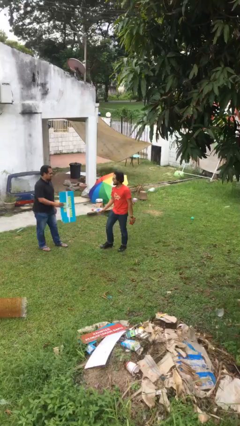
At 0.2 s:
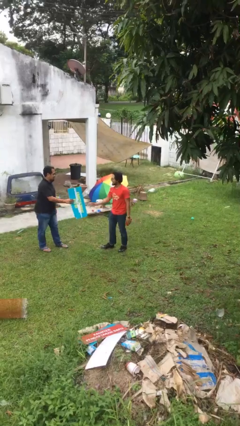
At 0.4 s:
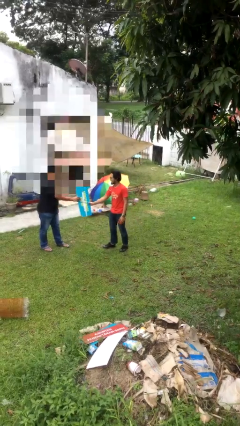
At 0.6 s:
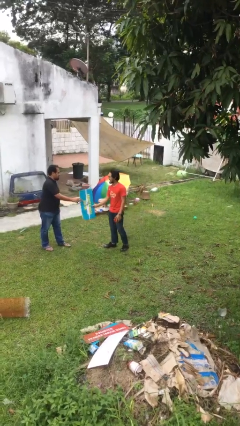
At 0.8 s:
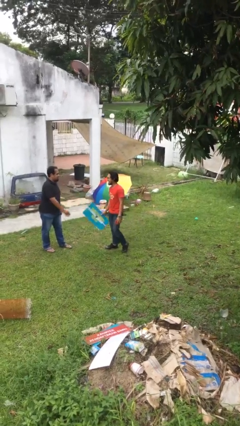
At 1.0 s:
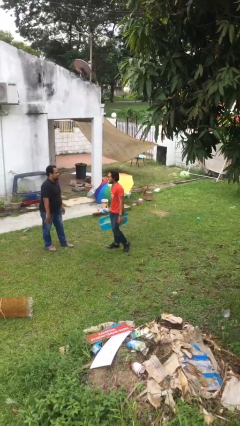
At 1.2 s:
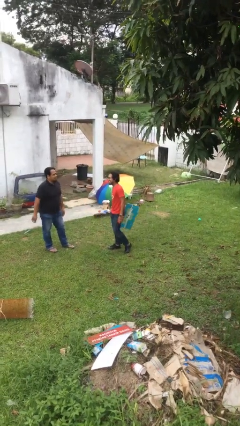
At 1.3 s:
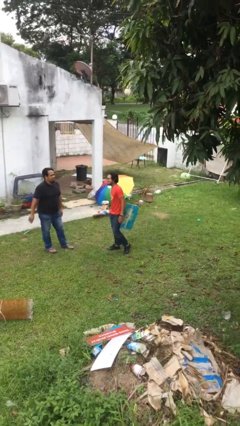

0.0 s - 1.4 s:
person transfers object to person

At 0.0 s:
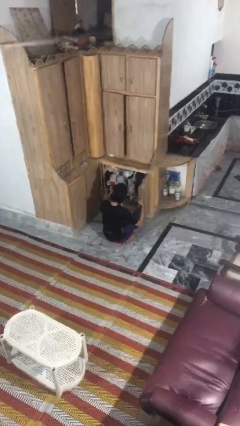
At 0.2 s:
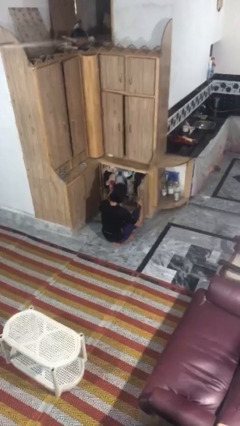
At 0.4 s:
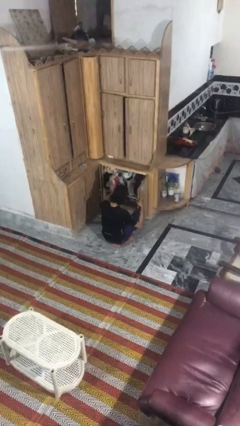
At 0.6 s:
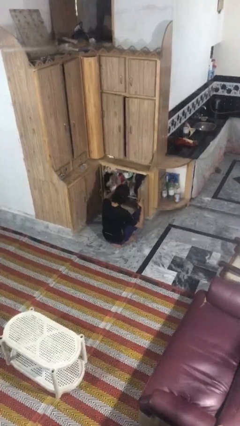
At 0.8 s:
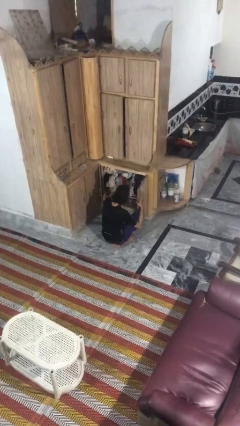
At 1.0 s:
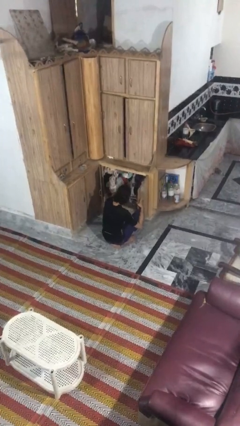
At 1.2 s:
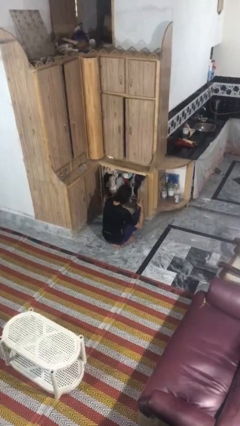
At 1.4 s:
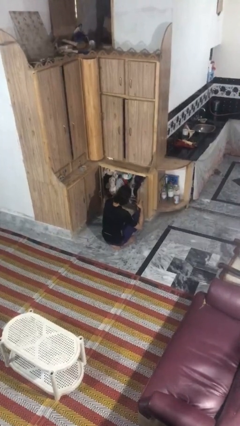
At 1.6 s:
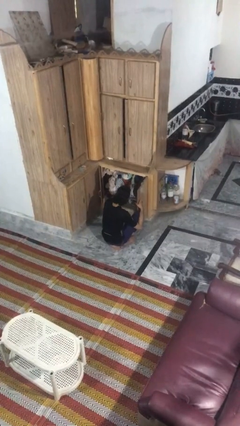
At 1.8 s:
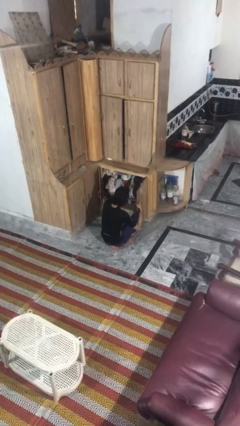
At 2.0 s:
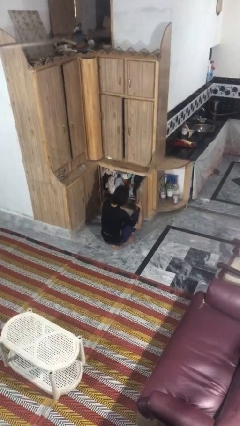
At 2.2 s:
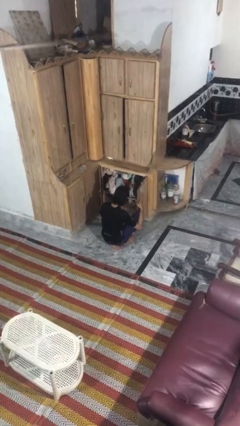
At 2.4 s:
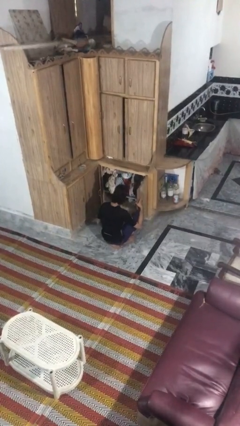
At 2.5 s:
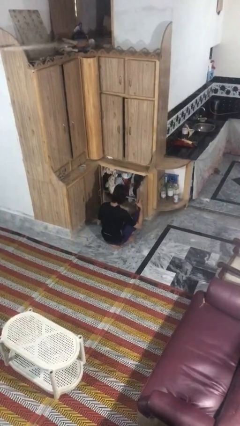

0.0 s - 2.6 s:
person puts down object into cabinet

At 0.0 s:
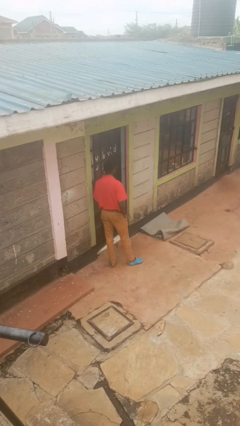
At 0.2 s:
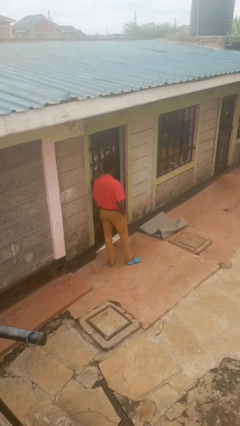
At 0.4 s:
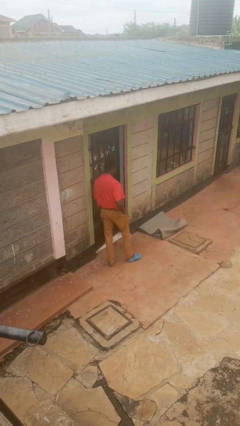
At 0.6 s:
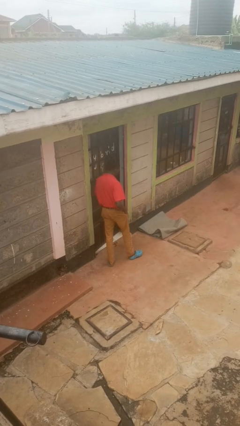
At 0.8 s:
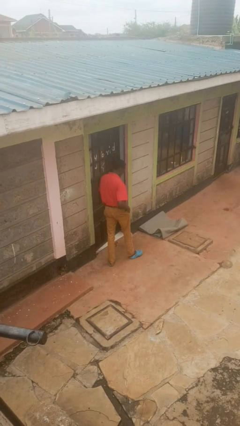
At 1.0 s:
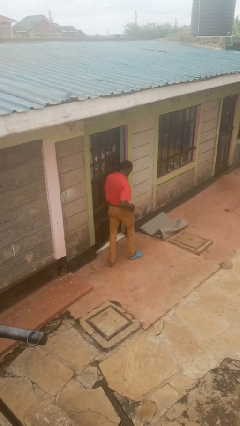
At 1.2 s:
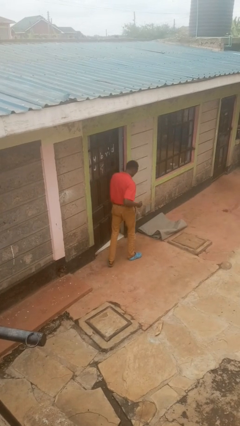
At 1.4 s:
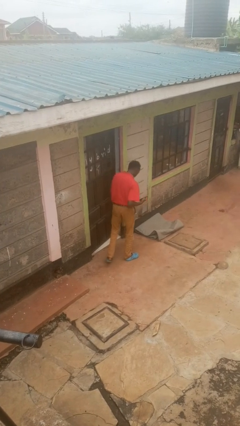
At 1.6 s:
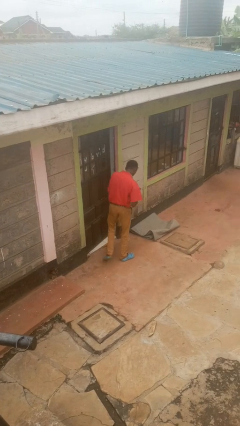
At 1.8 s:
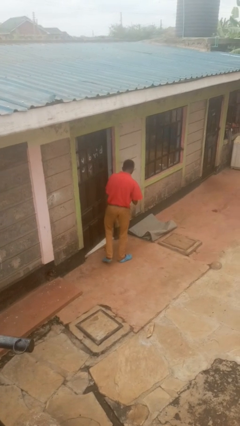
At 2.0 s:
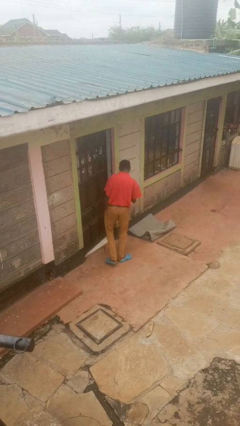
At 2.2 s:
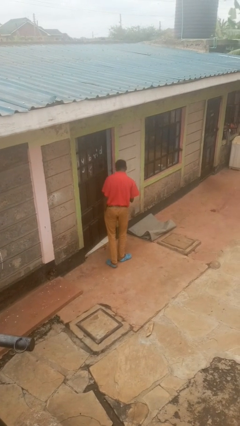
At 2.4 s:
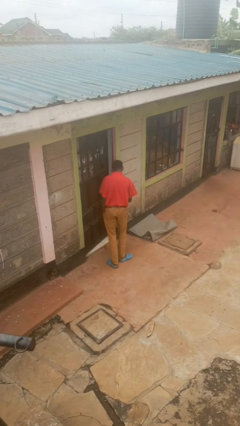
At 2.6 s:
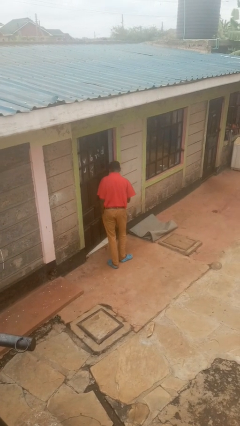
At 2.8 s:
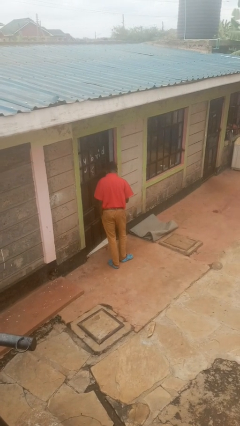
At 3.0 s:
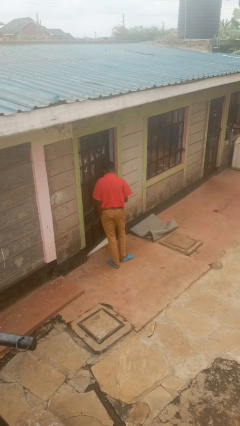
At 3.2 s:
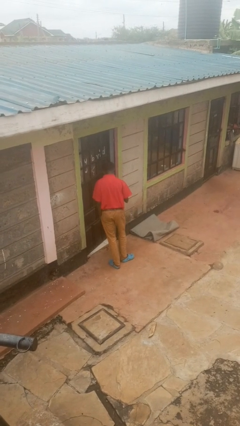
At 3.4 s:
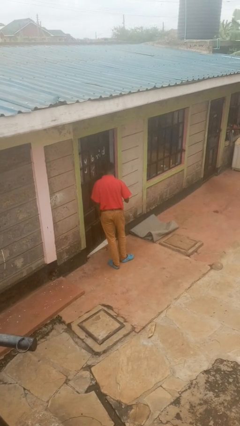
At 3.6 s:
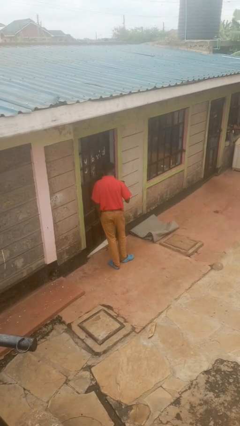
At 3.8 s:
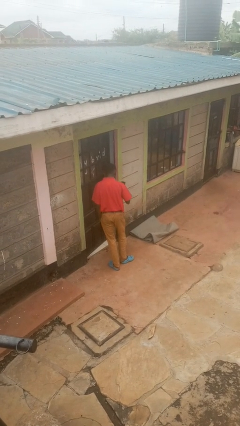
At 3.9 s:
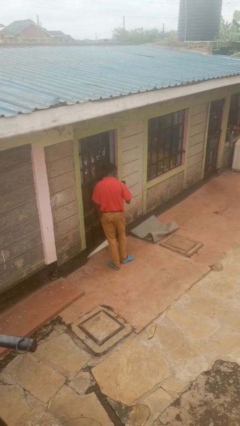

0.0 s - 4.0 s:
person takes phone from pocket

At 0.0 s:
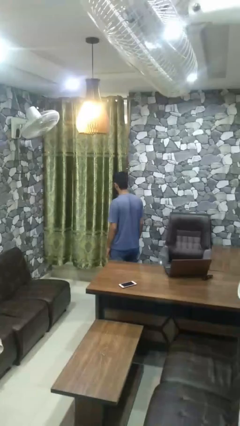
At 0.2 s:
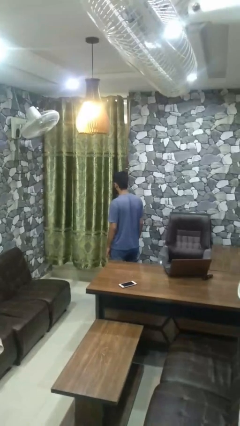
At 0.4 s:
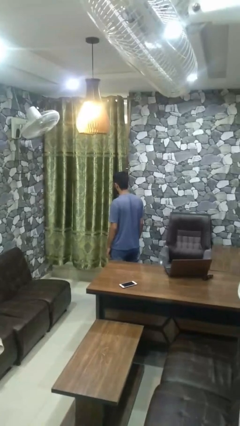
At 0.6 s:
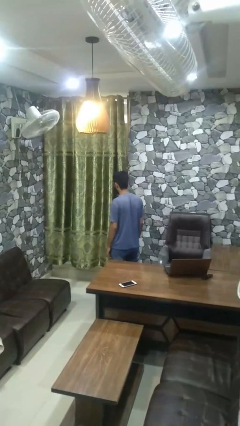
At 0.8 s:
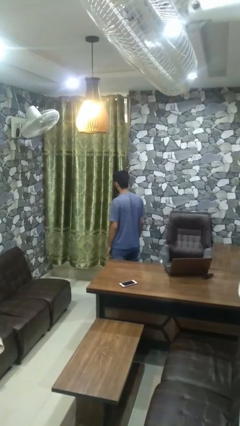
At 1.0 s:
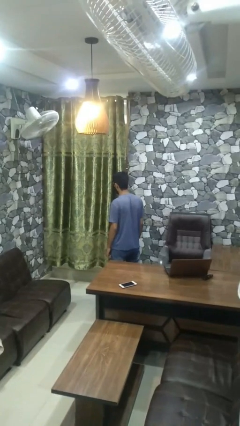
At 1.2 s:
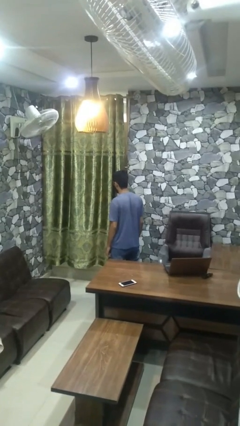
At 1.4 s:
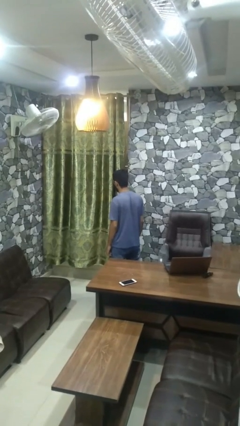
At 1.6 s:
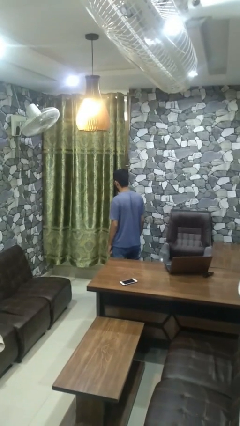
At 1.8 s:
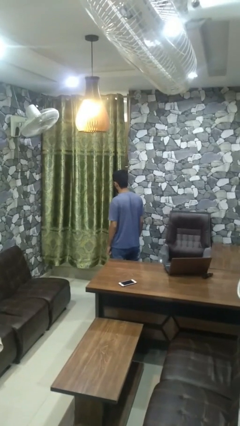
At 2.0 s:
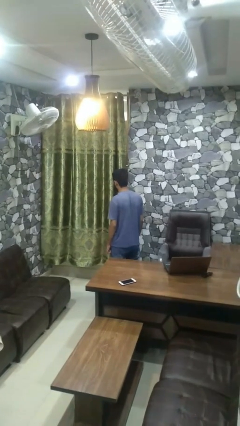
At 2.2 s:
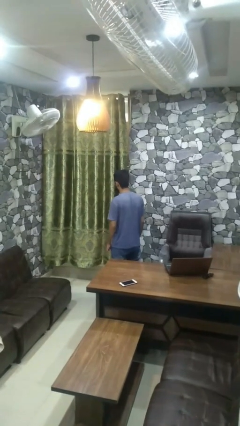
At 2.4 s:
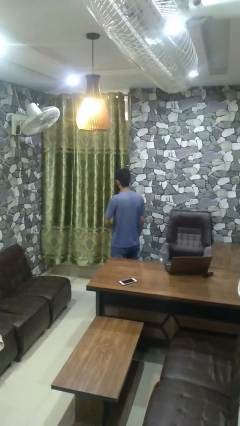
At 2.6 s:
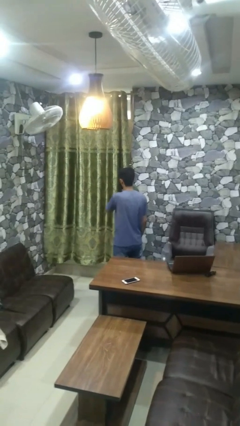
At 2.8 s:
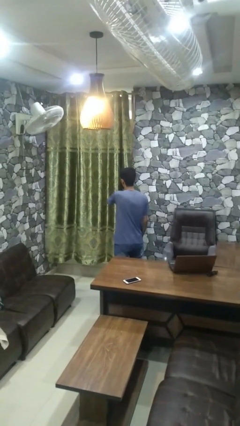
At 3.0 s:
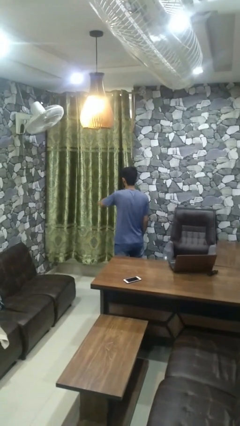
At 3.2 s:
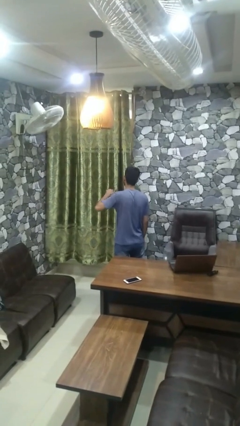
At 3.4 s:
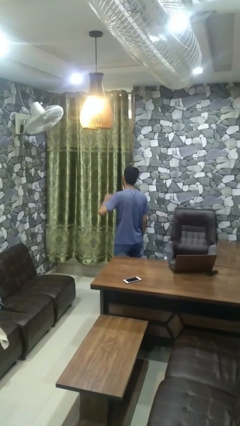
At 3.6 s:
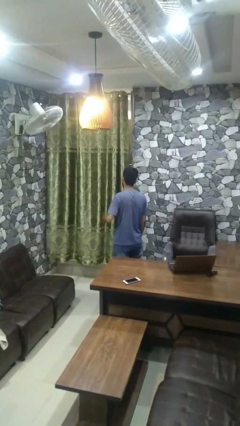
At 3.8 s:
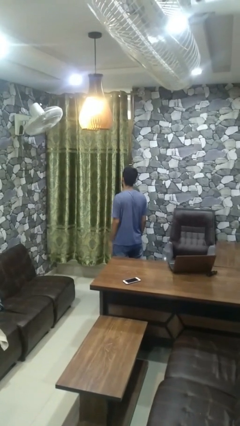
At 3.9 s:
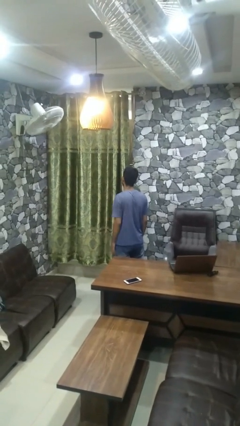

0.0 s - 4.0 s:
person gestures cut

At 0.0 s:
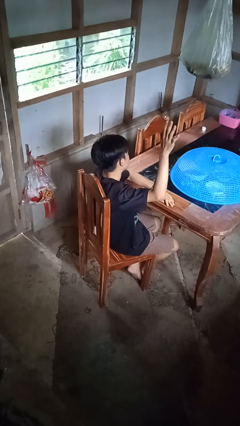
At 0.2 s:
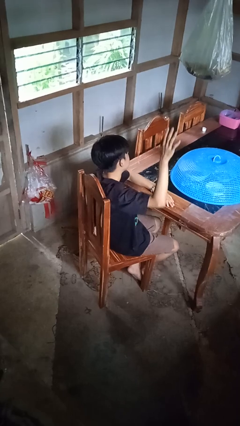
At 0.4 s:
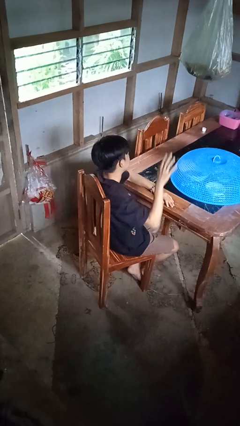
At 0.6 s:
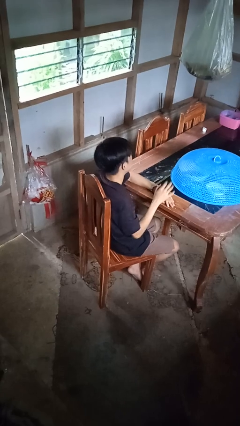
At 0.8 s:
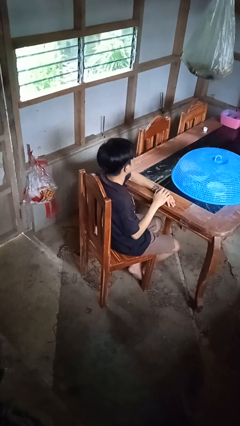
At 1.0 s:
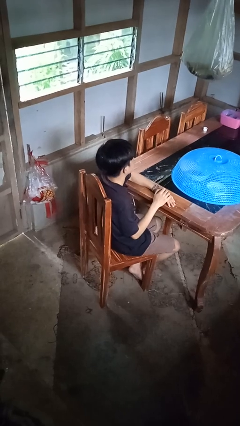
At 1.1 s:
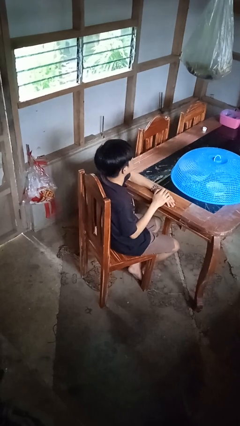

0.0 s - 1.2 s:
person gestures lower hand

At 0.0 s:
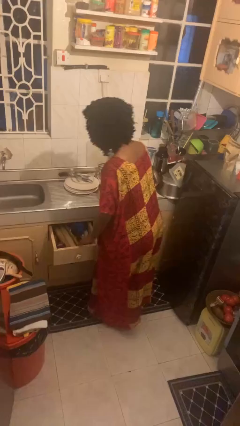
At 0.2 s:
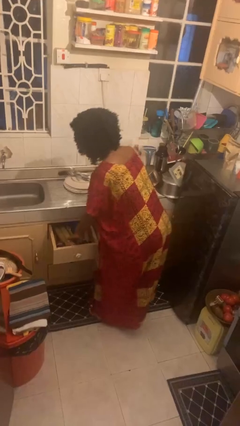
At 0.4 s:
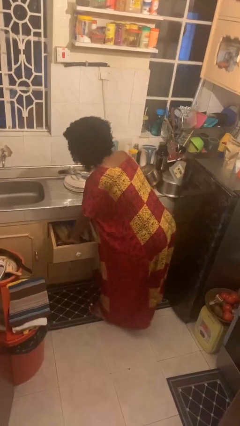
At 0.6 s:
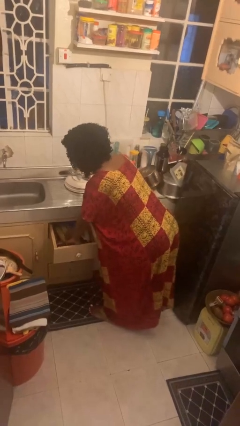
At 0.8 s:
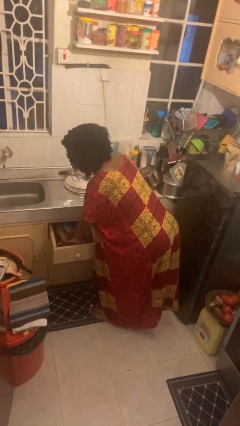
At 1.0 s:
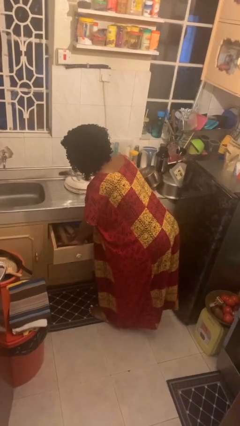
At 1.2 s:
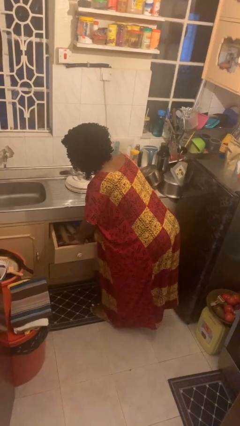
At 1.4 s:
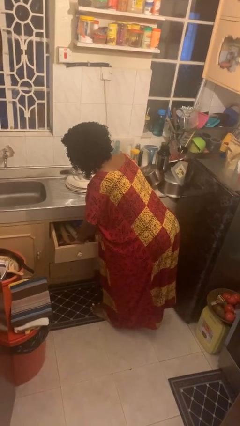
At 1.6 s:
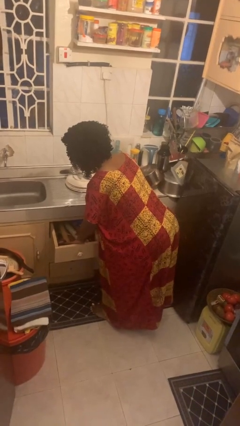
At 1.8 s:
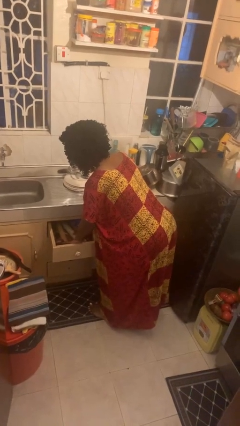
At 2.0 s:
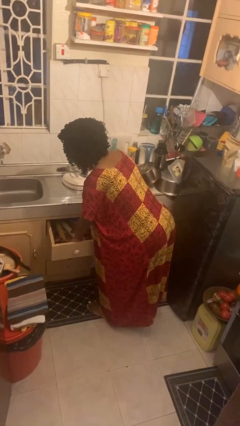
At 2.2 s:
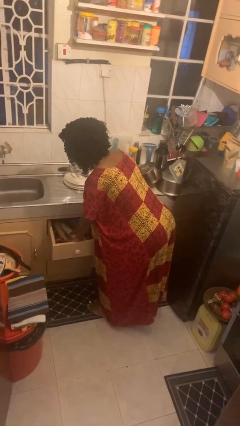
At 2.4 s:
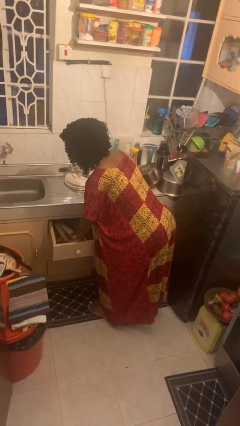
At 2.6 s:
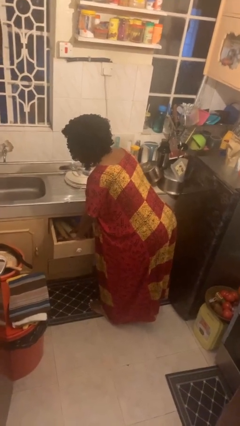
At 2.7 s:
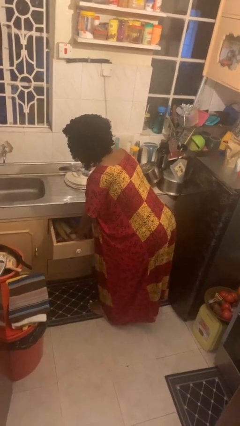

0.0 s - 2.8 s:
person searches in kitchen drawer

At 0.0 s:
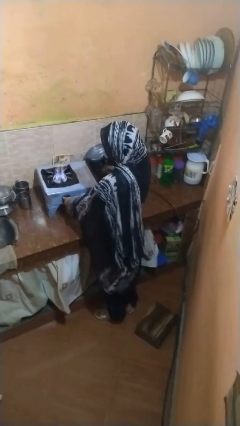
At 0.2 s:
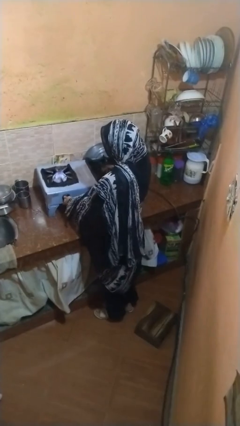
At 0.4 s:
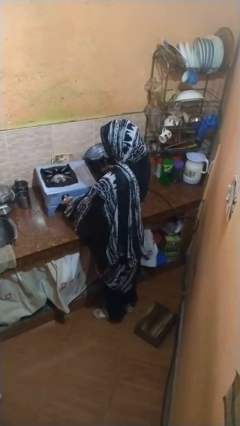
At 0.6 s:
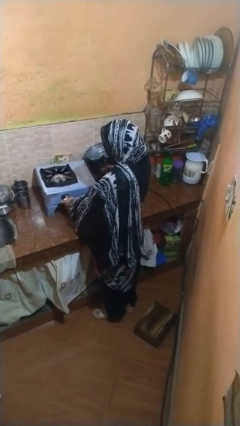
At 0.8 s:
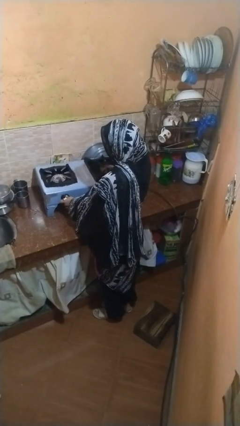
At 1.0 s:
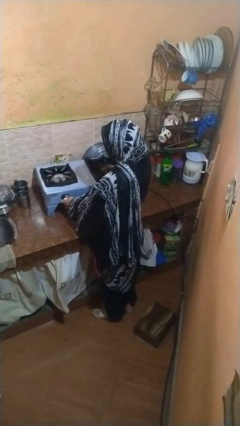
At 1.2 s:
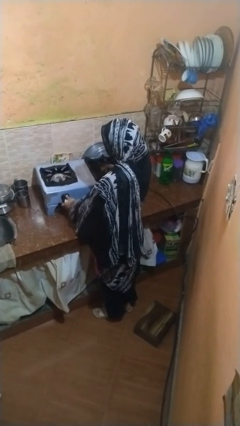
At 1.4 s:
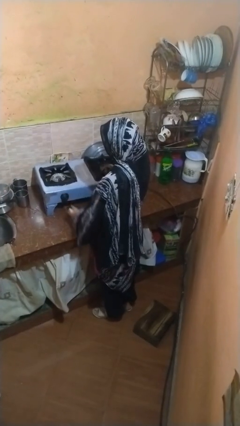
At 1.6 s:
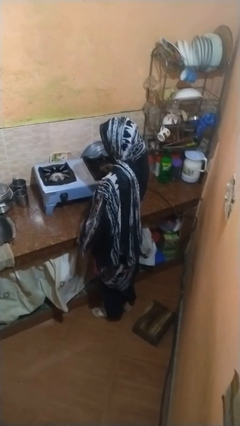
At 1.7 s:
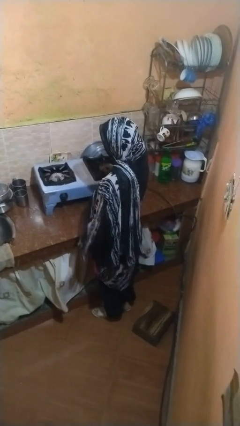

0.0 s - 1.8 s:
person turns off stovetop
